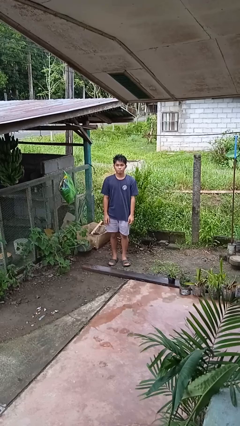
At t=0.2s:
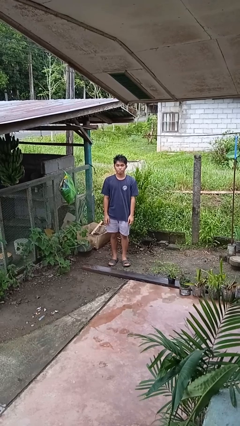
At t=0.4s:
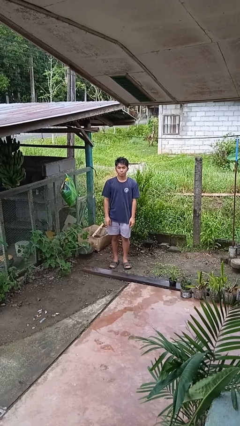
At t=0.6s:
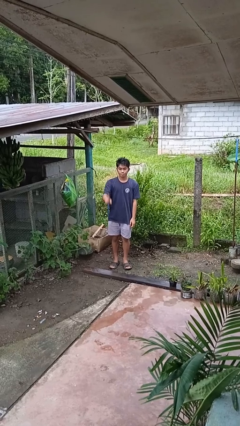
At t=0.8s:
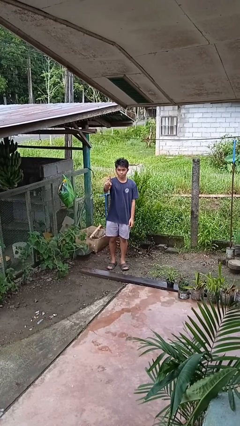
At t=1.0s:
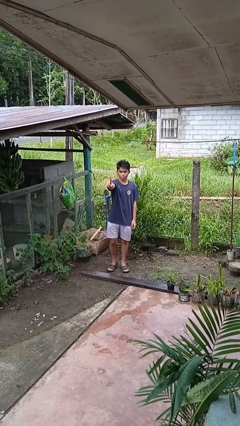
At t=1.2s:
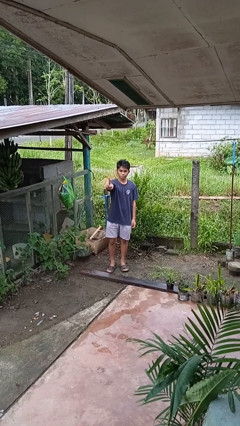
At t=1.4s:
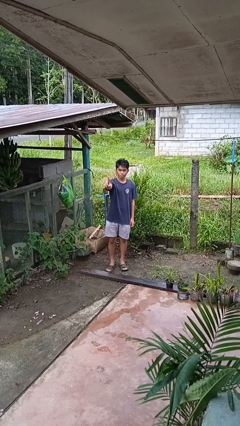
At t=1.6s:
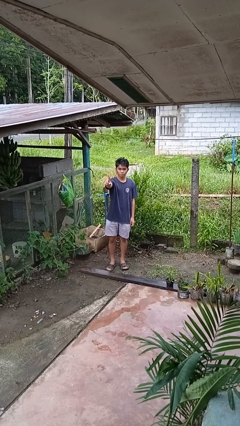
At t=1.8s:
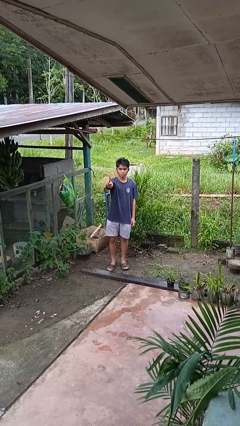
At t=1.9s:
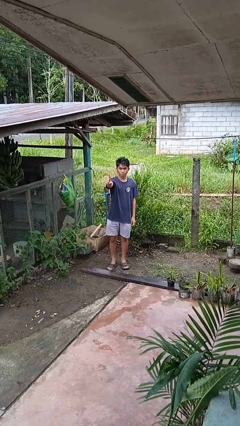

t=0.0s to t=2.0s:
person gestures number one

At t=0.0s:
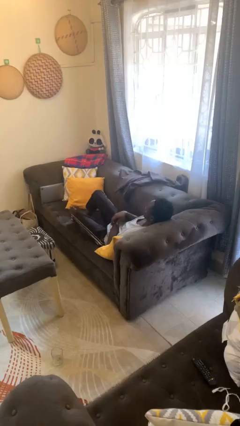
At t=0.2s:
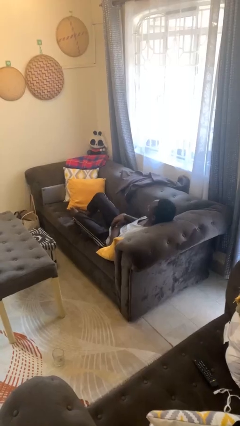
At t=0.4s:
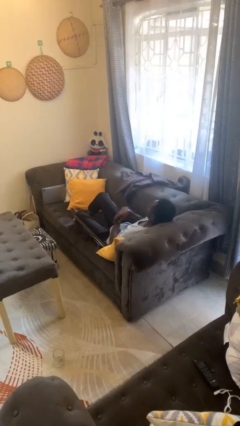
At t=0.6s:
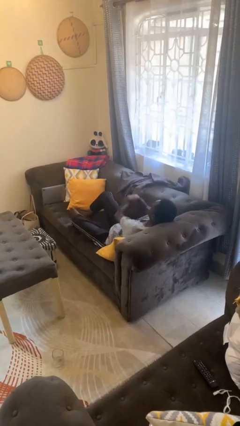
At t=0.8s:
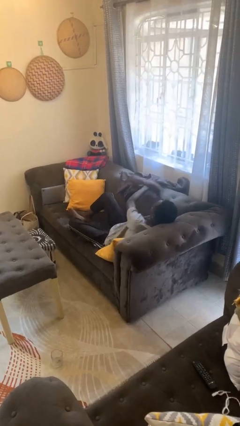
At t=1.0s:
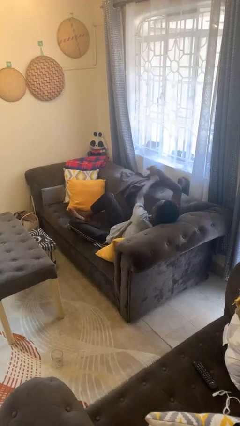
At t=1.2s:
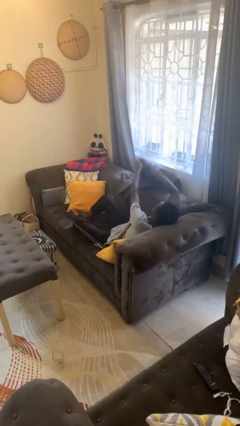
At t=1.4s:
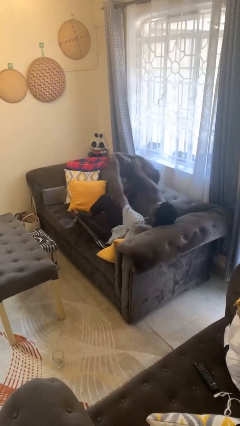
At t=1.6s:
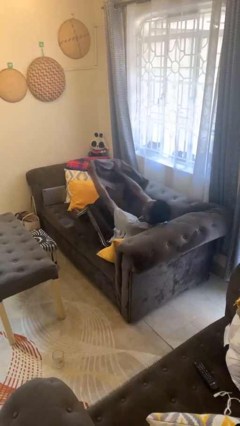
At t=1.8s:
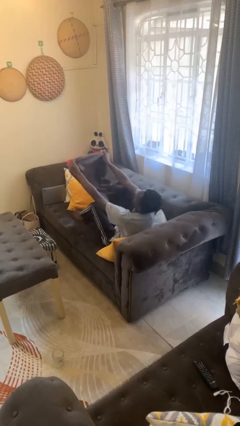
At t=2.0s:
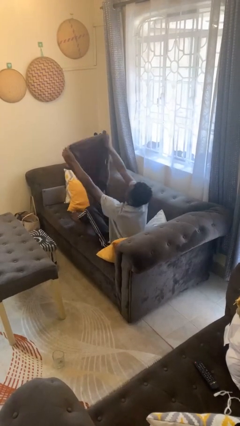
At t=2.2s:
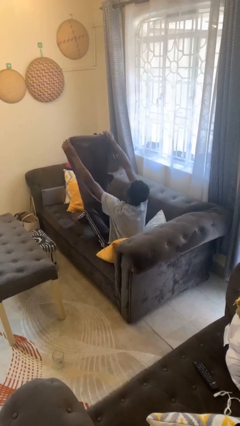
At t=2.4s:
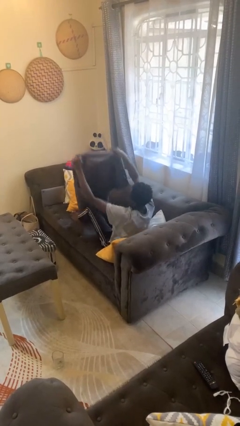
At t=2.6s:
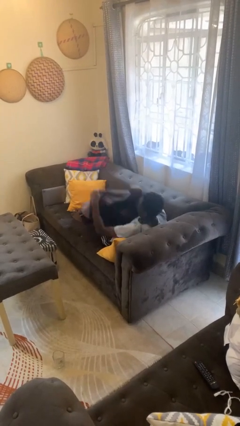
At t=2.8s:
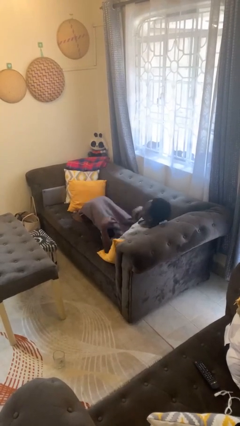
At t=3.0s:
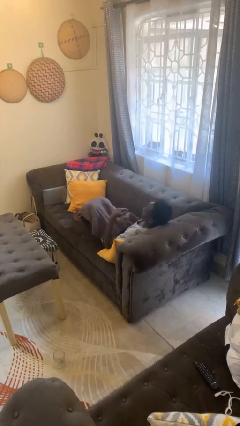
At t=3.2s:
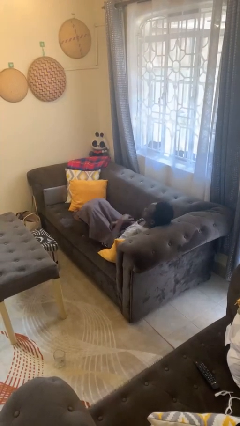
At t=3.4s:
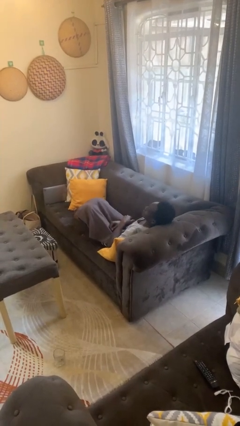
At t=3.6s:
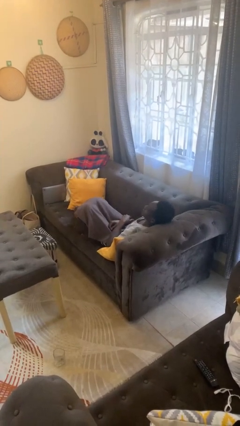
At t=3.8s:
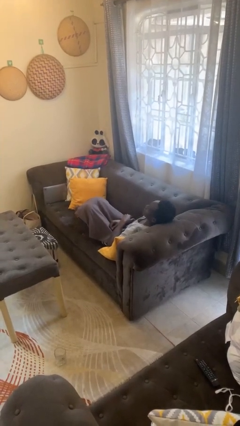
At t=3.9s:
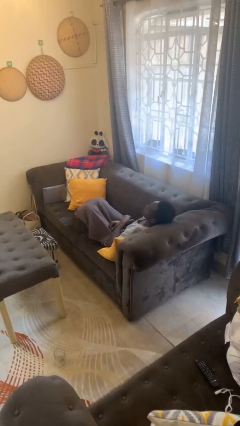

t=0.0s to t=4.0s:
person covers with blanket

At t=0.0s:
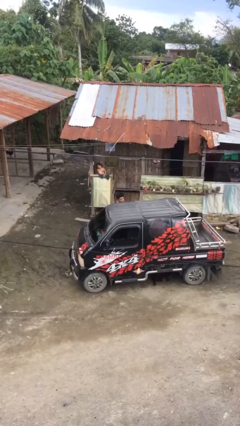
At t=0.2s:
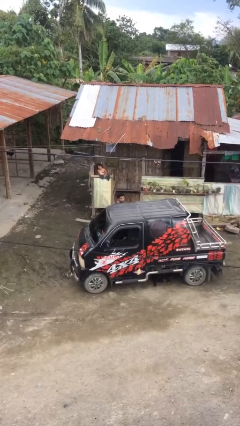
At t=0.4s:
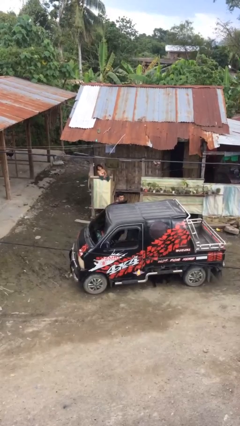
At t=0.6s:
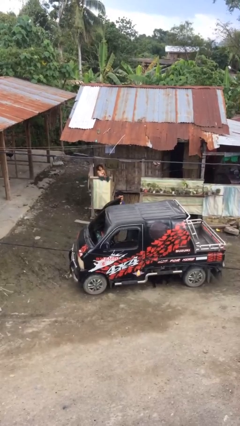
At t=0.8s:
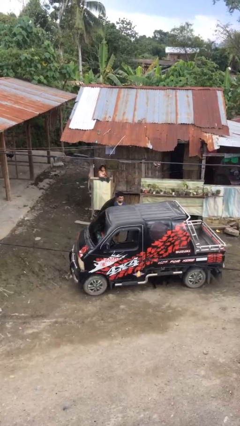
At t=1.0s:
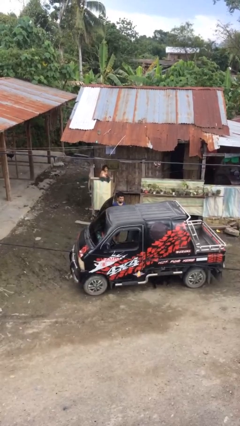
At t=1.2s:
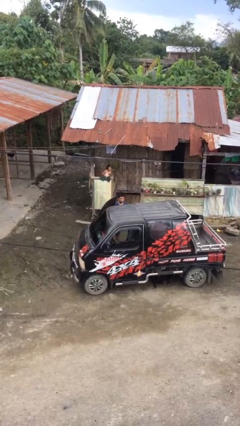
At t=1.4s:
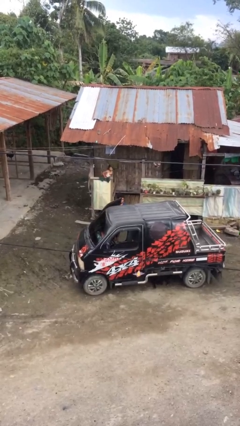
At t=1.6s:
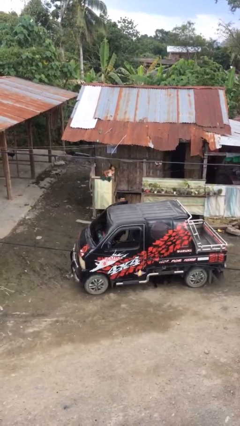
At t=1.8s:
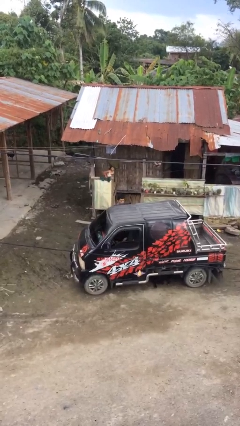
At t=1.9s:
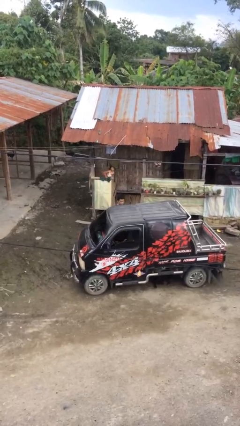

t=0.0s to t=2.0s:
person opens car door

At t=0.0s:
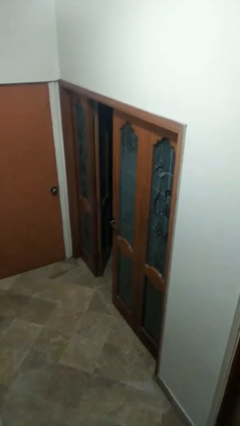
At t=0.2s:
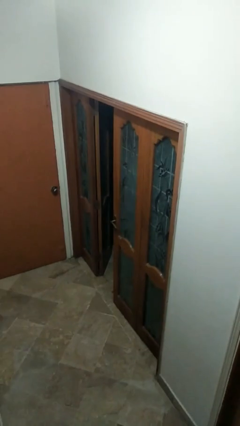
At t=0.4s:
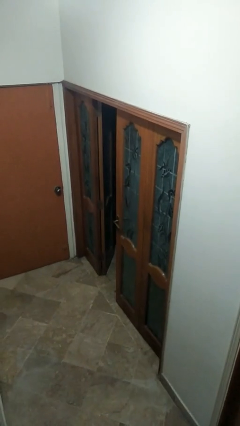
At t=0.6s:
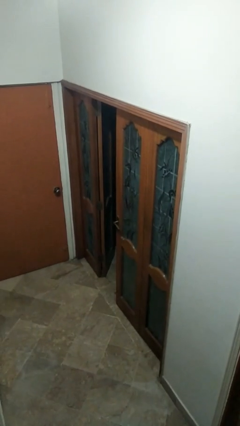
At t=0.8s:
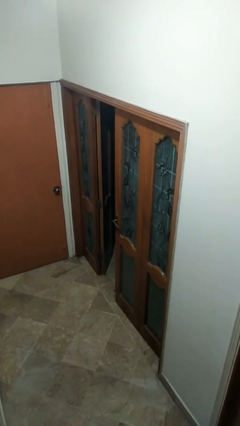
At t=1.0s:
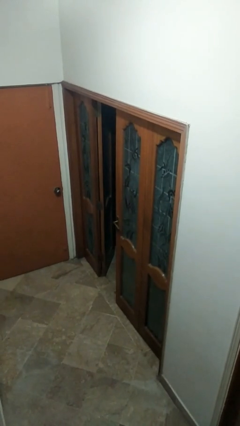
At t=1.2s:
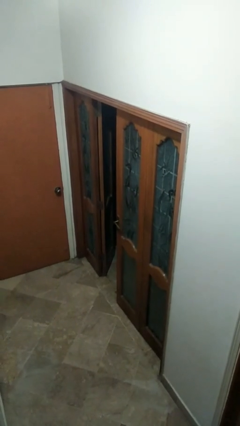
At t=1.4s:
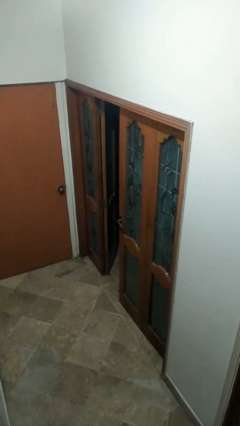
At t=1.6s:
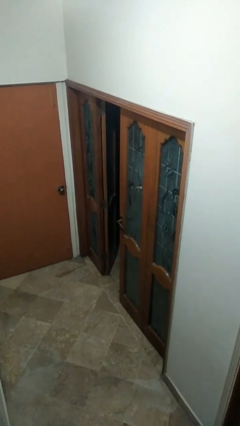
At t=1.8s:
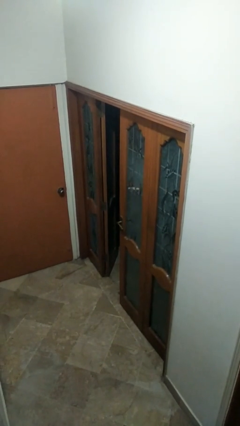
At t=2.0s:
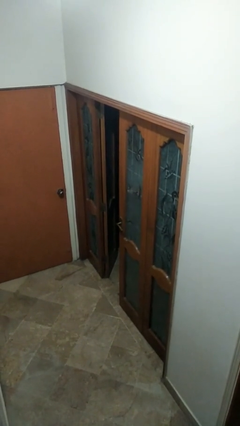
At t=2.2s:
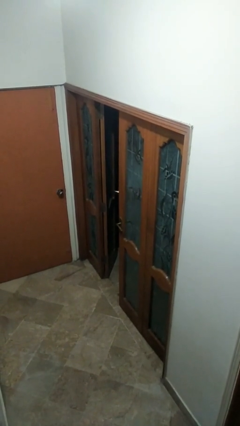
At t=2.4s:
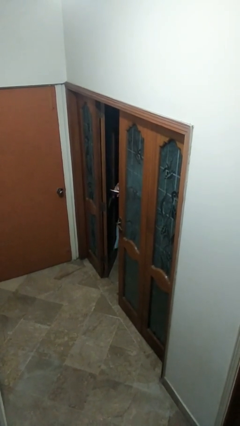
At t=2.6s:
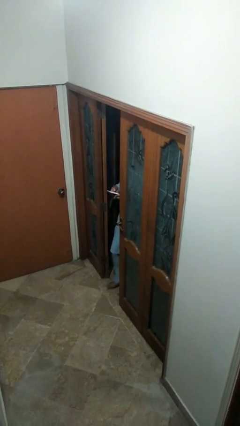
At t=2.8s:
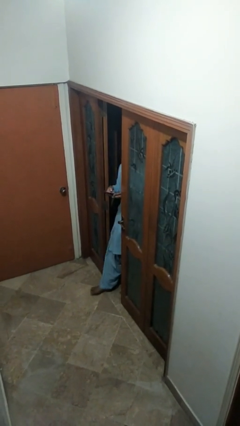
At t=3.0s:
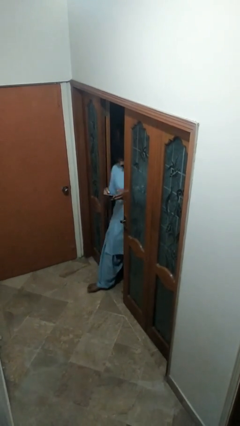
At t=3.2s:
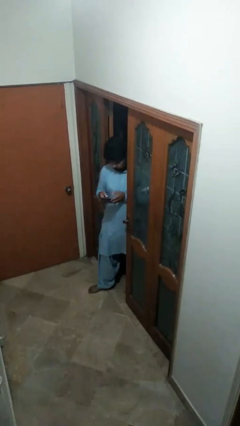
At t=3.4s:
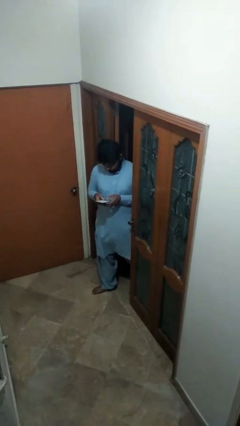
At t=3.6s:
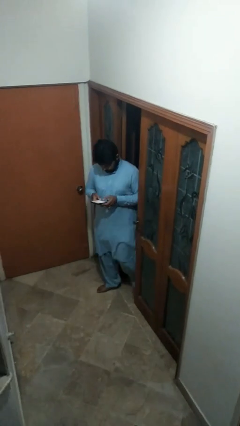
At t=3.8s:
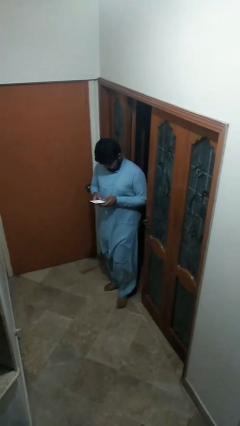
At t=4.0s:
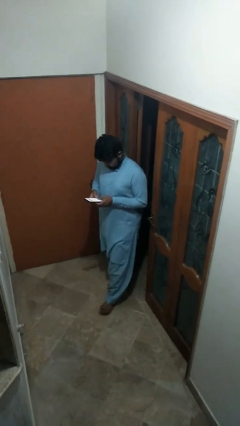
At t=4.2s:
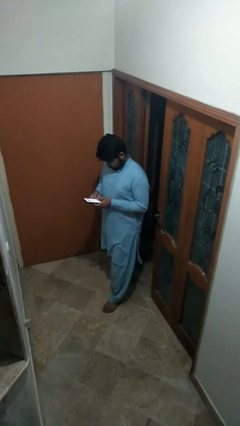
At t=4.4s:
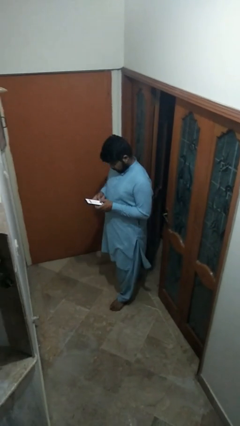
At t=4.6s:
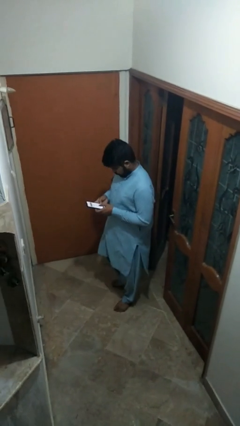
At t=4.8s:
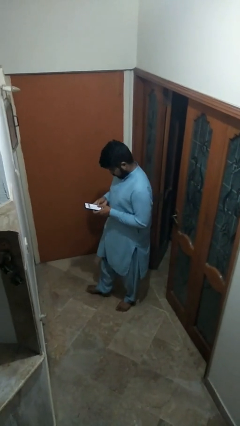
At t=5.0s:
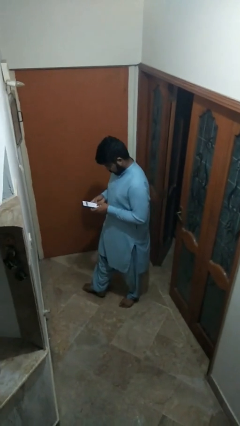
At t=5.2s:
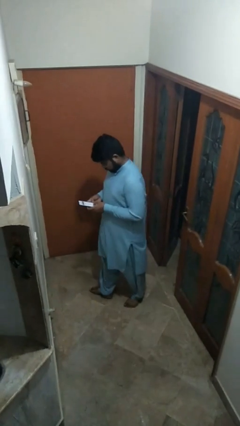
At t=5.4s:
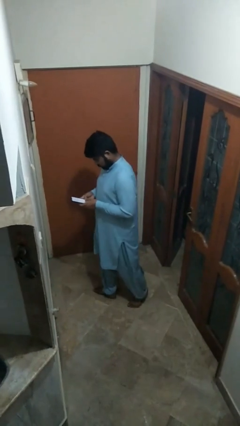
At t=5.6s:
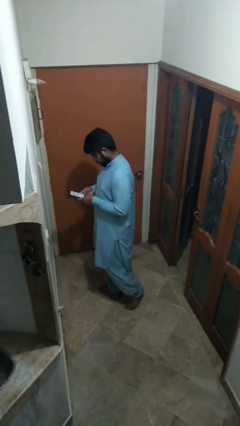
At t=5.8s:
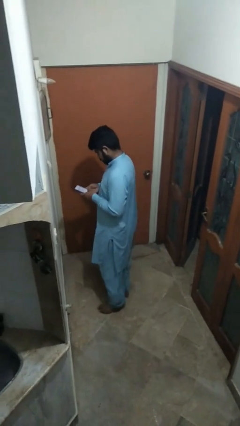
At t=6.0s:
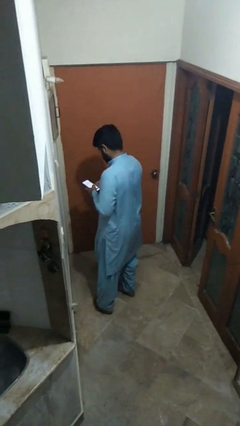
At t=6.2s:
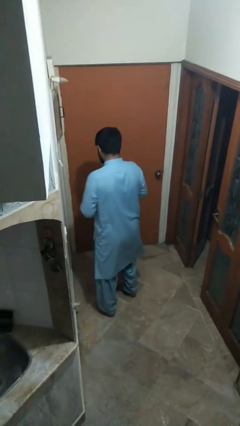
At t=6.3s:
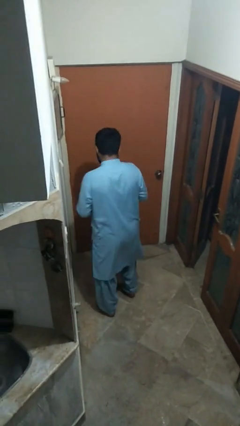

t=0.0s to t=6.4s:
person enters scene through structure

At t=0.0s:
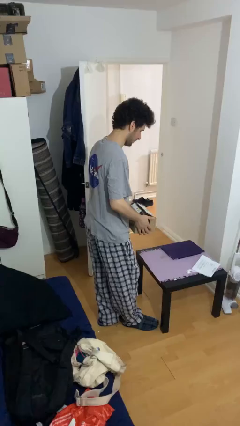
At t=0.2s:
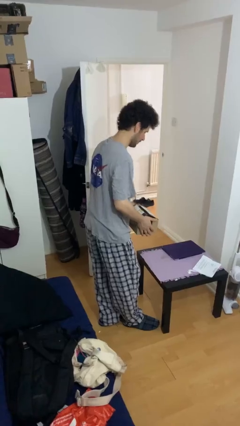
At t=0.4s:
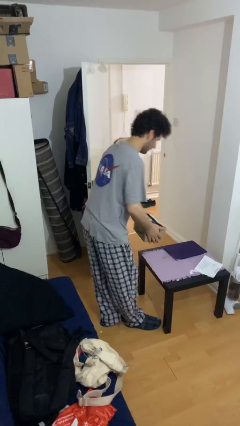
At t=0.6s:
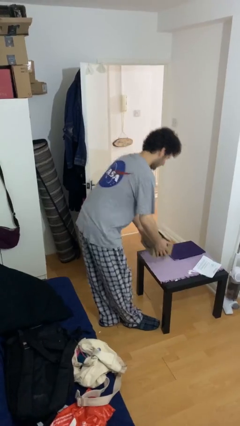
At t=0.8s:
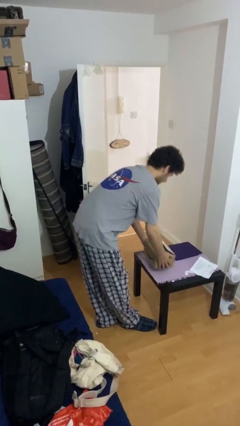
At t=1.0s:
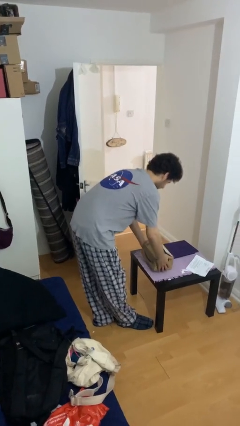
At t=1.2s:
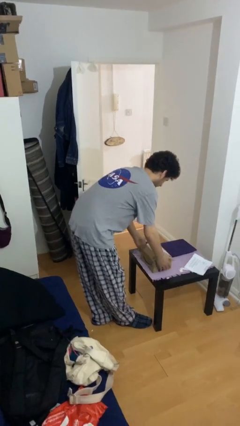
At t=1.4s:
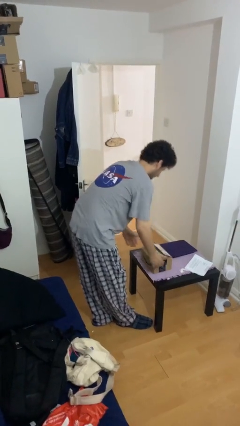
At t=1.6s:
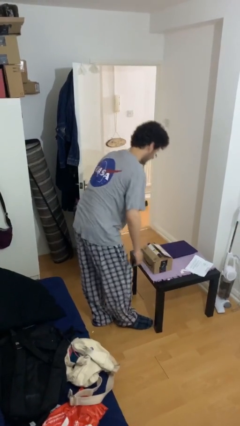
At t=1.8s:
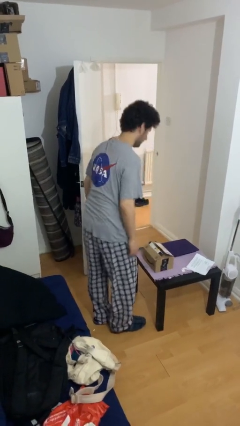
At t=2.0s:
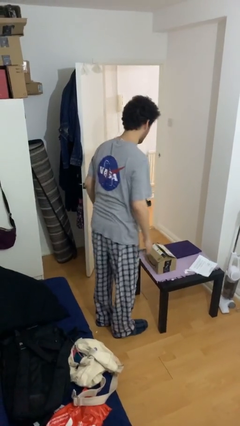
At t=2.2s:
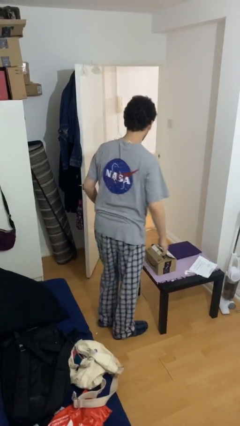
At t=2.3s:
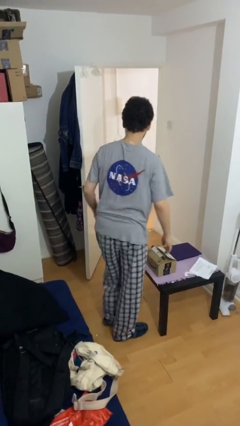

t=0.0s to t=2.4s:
person puts down object on table
